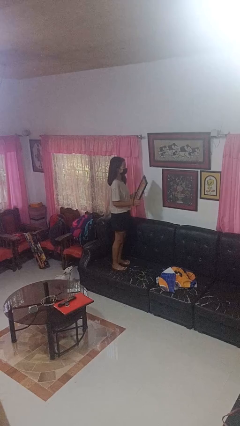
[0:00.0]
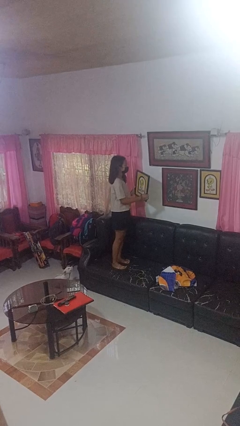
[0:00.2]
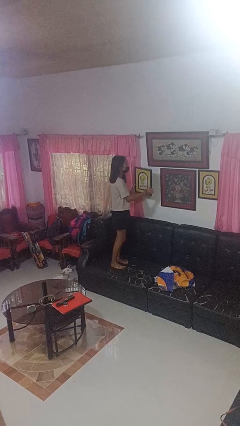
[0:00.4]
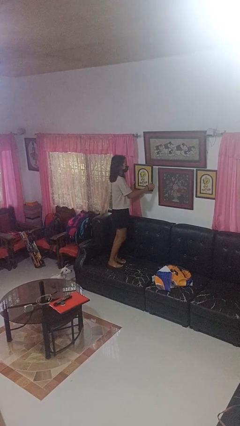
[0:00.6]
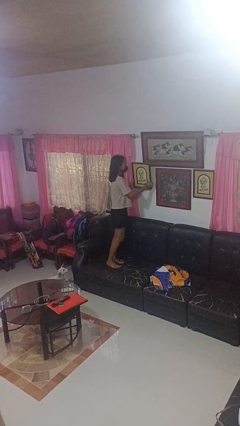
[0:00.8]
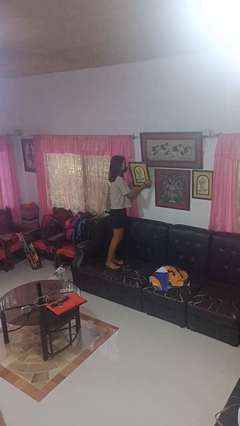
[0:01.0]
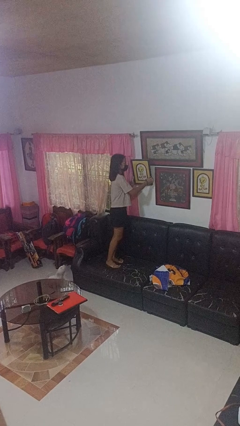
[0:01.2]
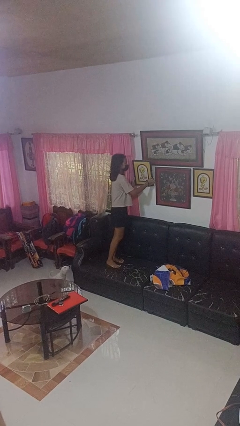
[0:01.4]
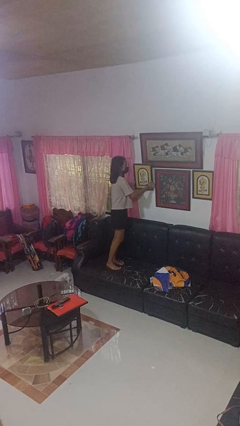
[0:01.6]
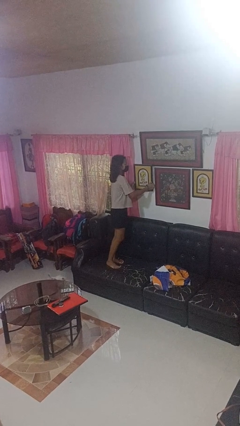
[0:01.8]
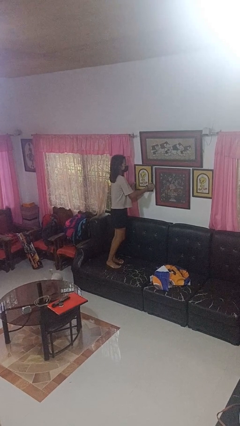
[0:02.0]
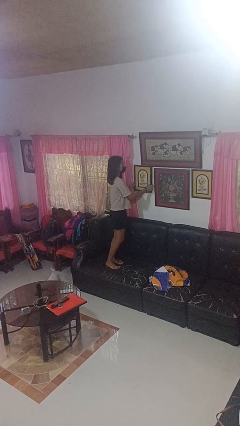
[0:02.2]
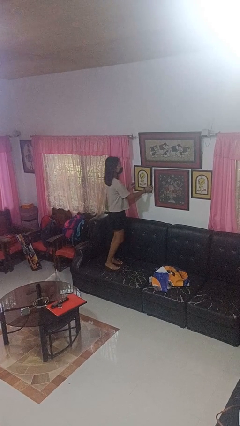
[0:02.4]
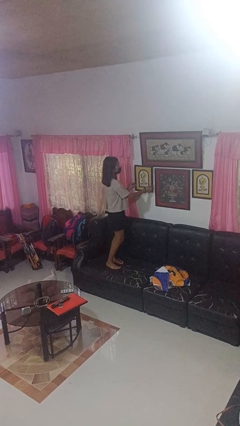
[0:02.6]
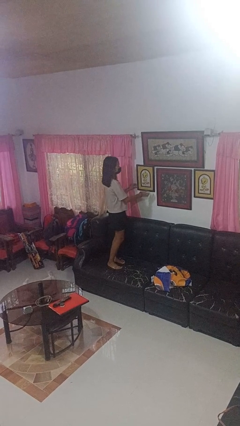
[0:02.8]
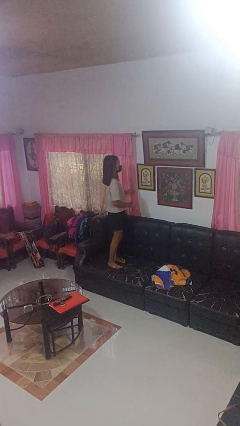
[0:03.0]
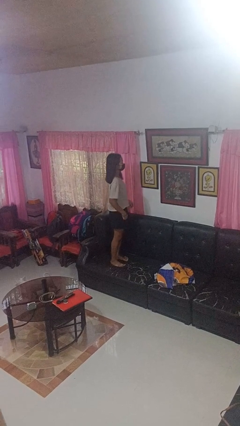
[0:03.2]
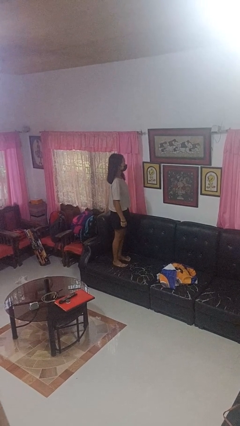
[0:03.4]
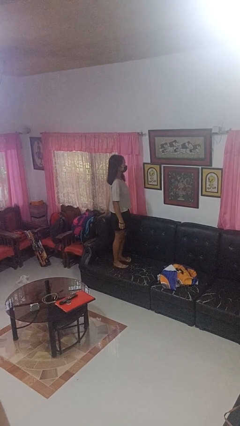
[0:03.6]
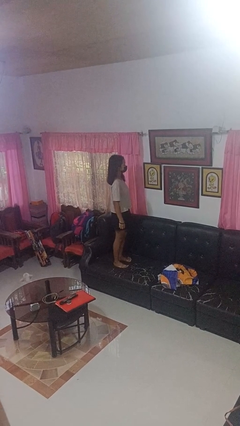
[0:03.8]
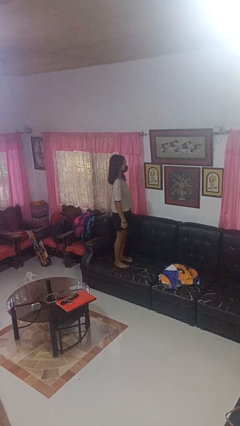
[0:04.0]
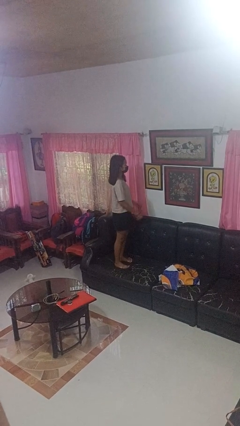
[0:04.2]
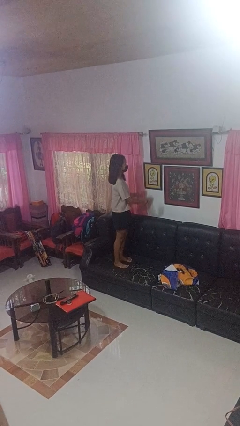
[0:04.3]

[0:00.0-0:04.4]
person puts up picture frame

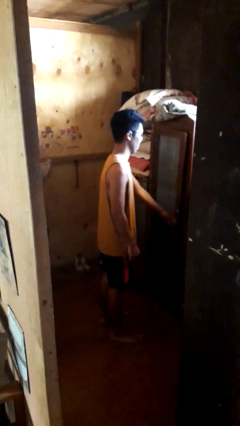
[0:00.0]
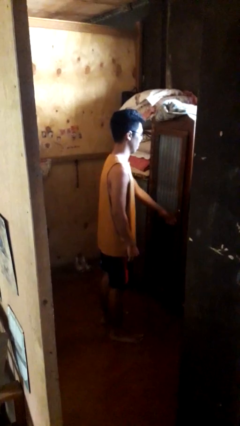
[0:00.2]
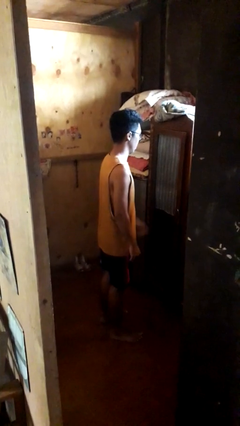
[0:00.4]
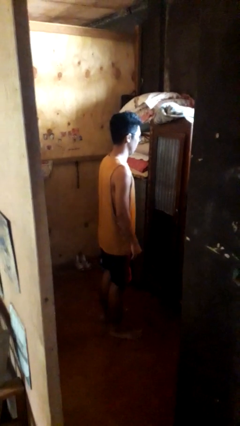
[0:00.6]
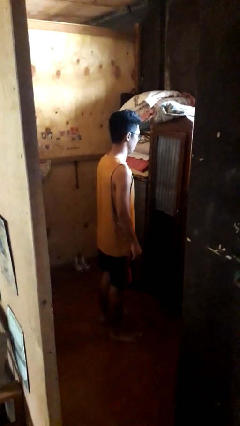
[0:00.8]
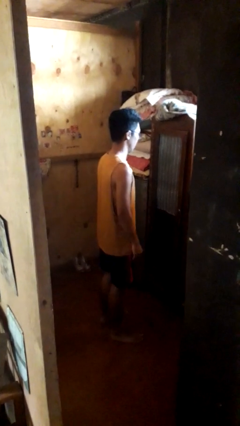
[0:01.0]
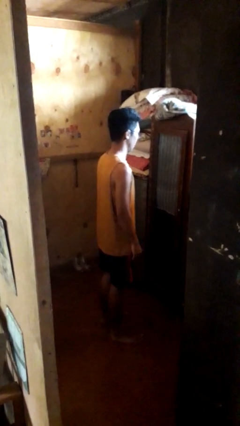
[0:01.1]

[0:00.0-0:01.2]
person closes closet door

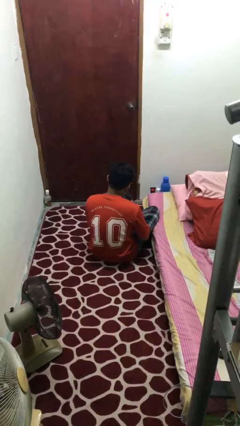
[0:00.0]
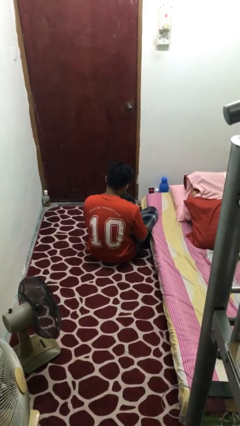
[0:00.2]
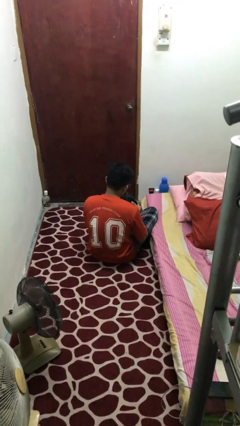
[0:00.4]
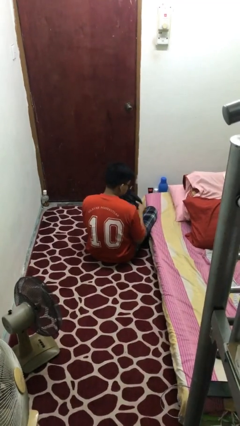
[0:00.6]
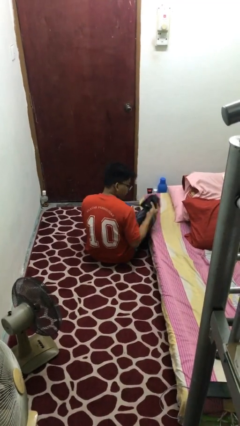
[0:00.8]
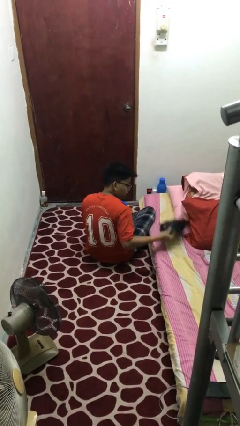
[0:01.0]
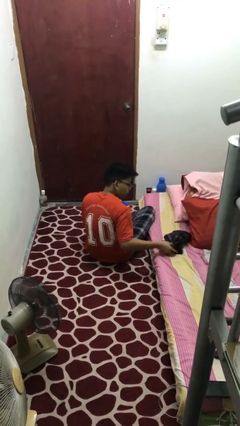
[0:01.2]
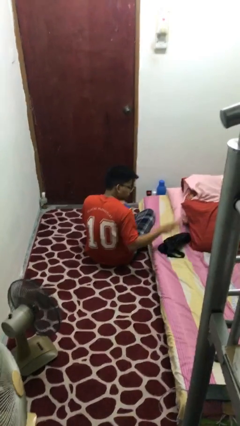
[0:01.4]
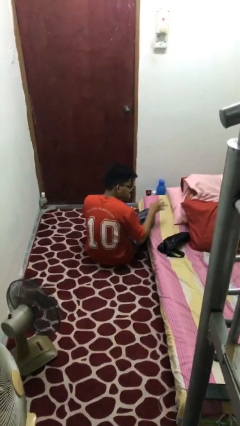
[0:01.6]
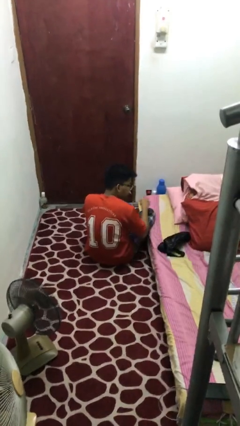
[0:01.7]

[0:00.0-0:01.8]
person puts down object on bed

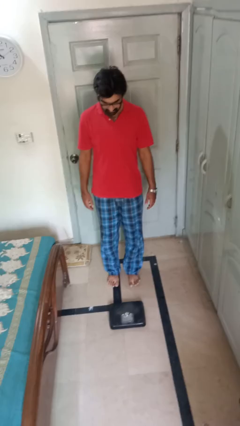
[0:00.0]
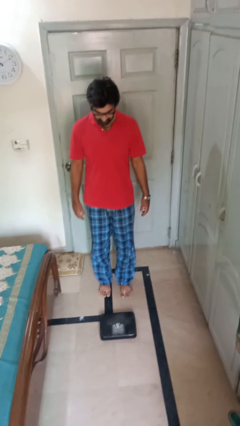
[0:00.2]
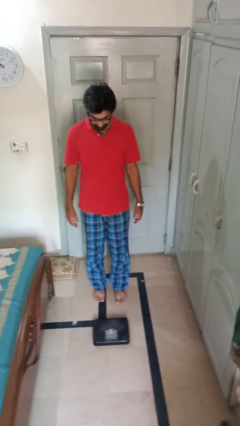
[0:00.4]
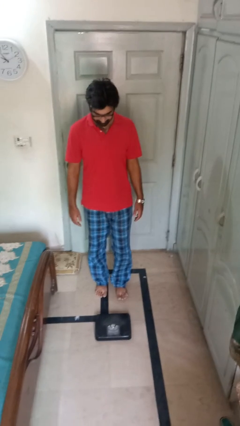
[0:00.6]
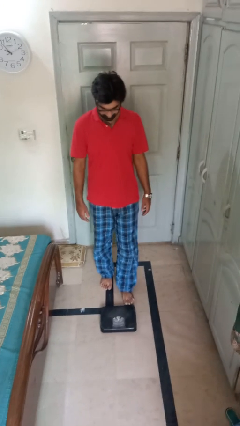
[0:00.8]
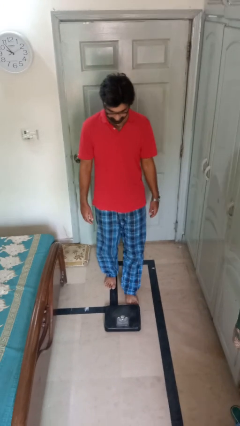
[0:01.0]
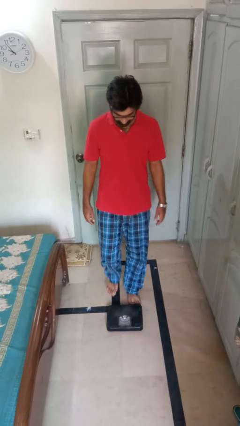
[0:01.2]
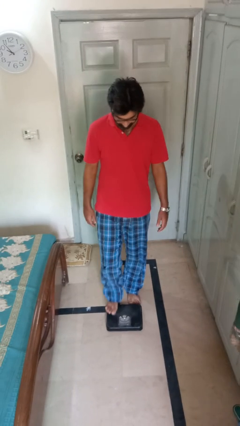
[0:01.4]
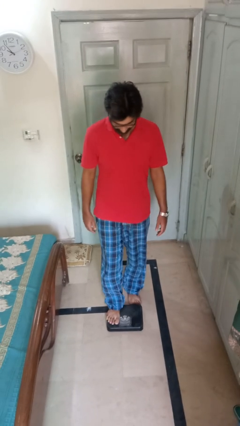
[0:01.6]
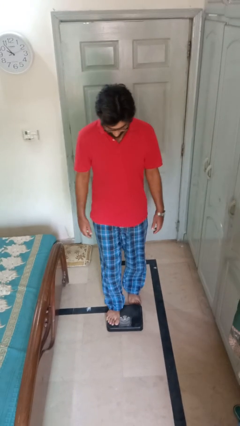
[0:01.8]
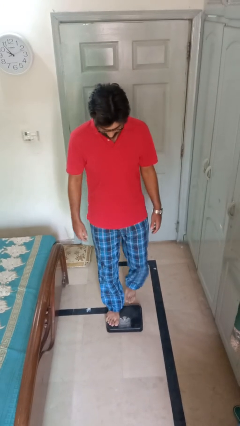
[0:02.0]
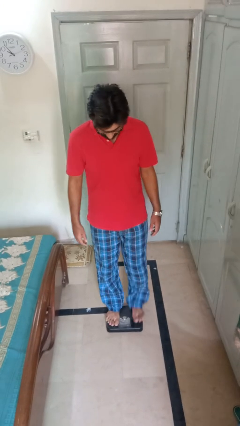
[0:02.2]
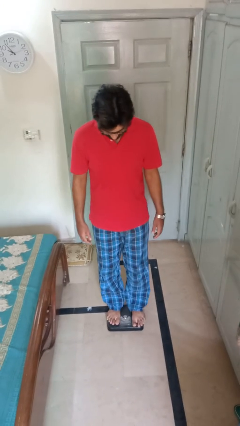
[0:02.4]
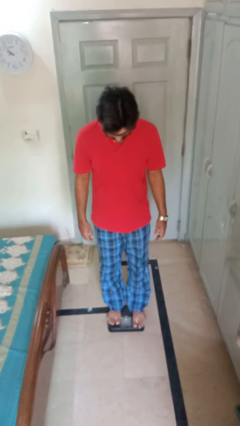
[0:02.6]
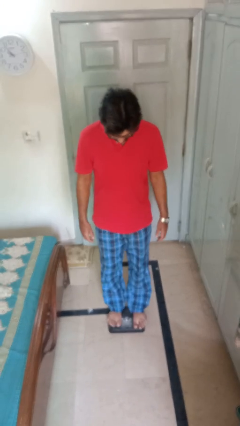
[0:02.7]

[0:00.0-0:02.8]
person uses bodyweight scale

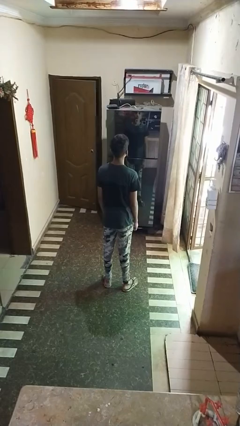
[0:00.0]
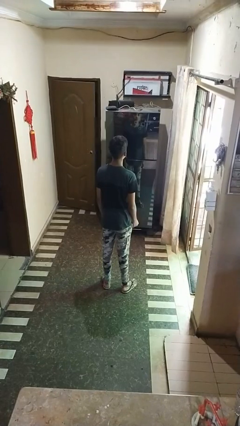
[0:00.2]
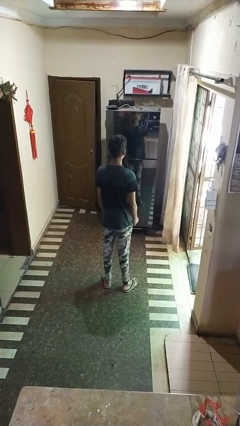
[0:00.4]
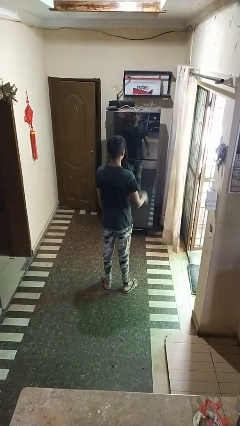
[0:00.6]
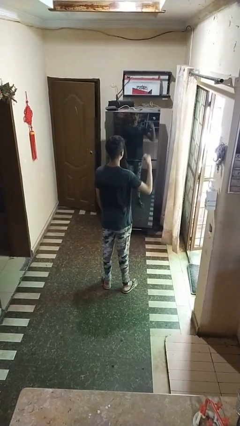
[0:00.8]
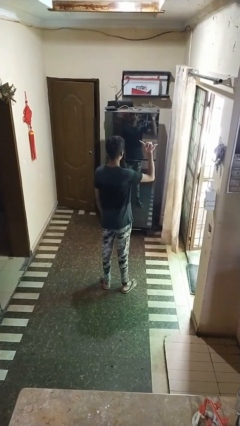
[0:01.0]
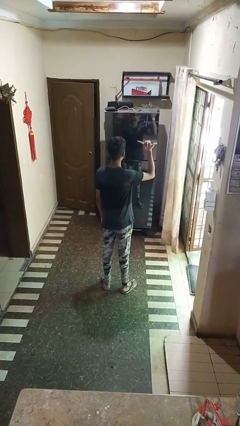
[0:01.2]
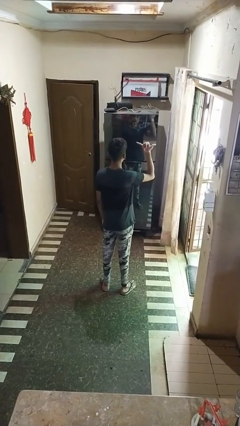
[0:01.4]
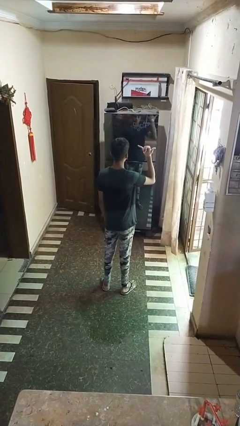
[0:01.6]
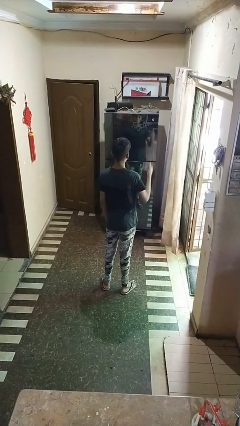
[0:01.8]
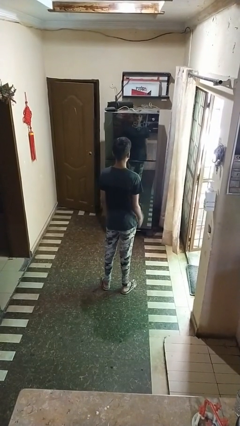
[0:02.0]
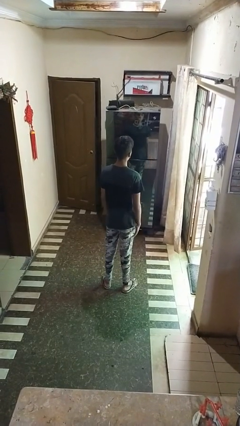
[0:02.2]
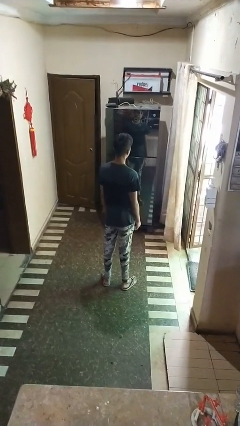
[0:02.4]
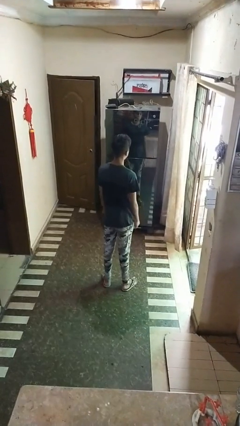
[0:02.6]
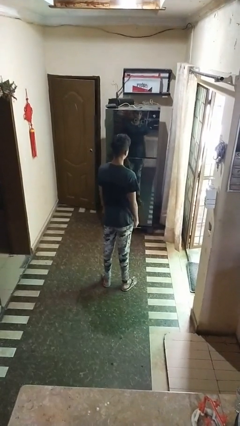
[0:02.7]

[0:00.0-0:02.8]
person gestures hang loose

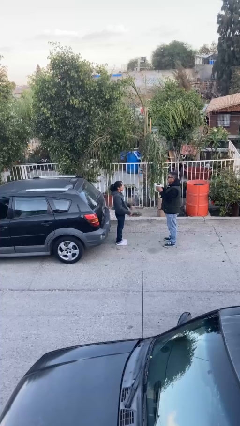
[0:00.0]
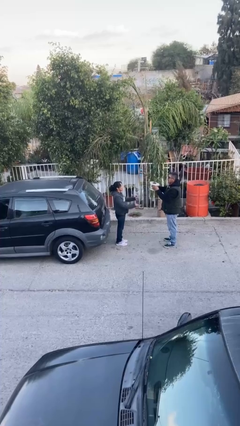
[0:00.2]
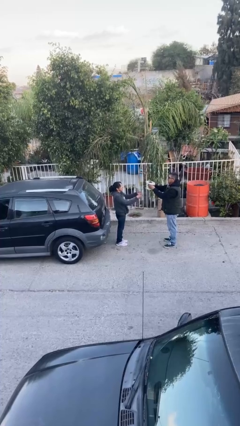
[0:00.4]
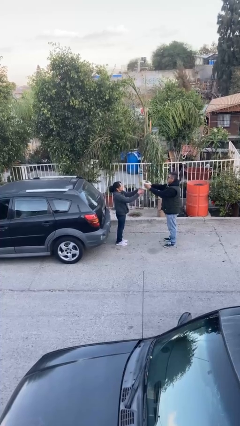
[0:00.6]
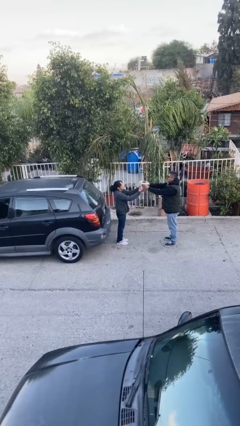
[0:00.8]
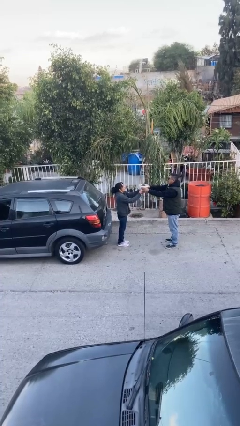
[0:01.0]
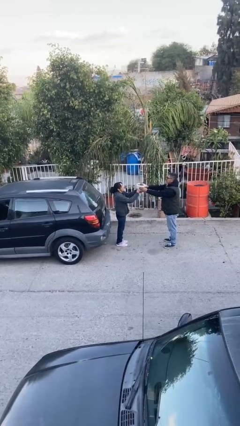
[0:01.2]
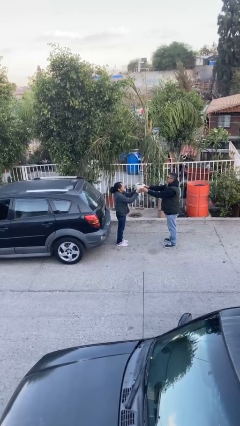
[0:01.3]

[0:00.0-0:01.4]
person transfers object to person

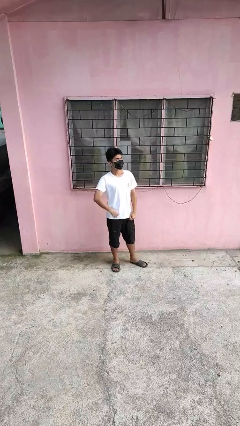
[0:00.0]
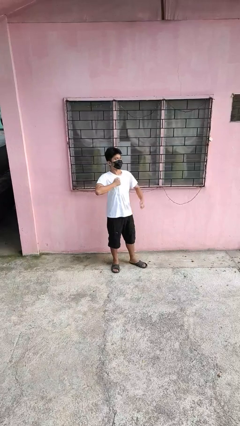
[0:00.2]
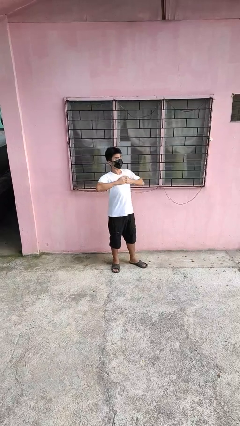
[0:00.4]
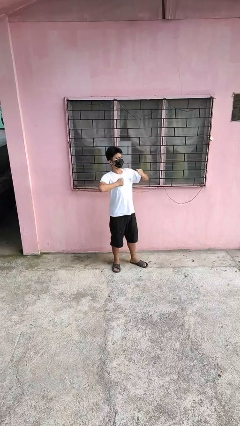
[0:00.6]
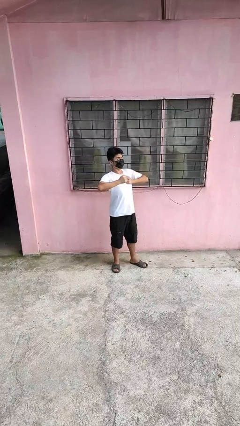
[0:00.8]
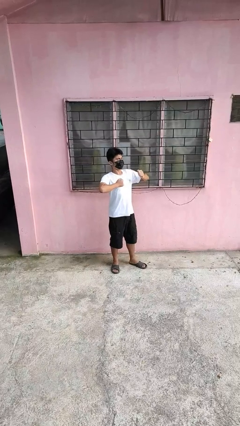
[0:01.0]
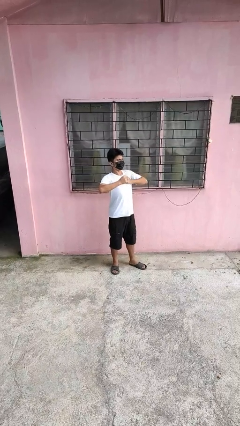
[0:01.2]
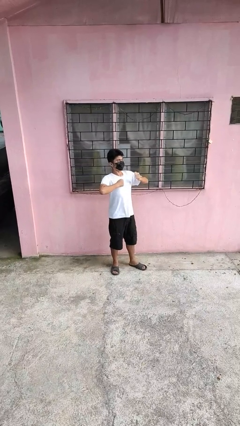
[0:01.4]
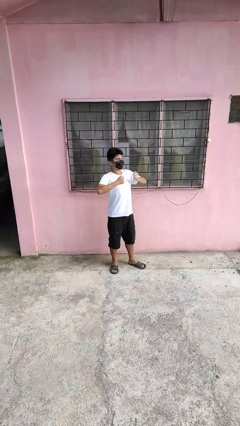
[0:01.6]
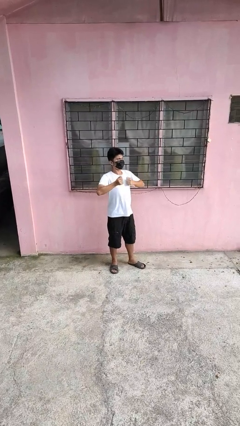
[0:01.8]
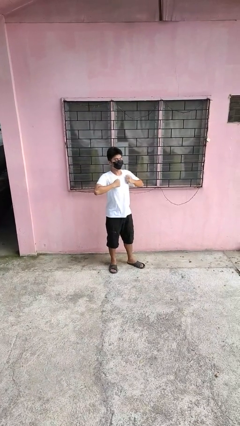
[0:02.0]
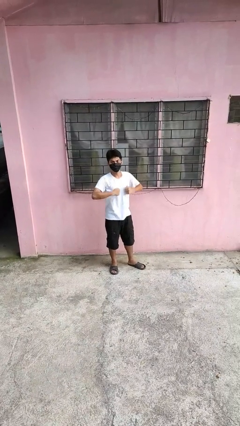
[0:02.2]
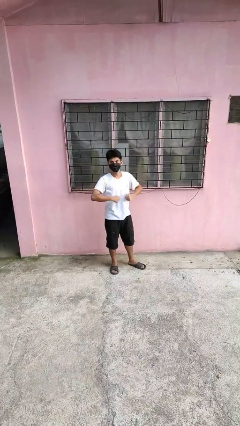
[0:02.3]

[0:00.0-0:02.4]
person drums on chest
